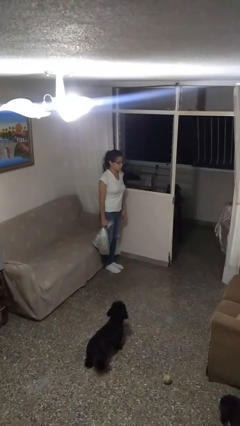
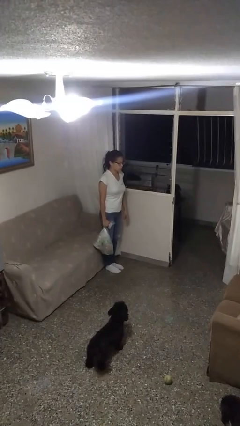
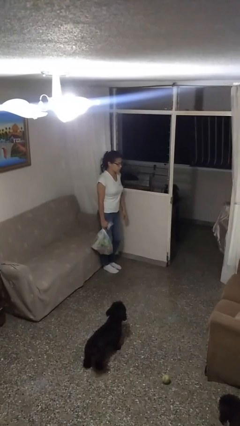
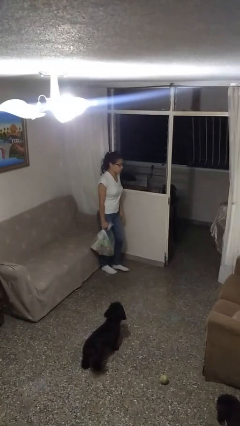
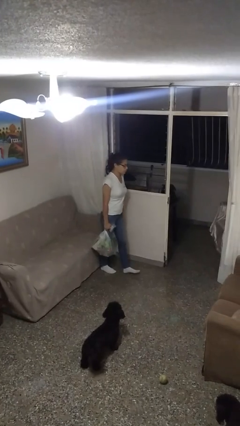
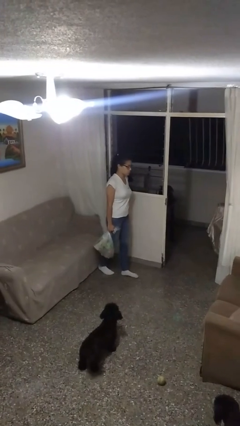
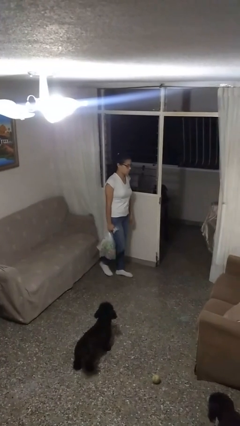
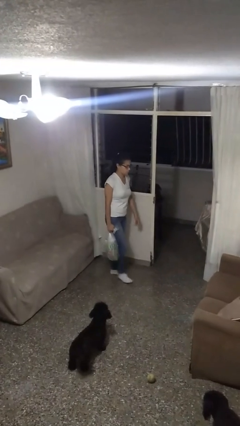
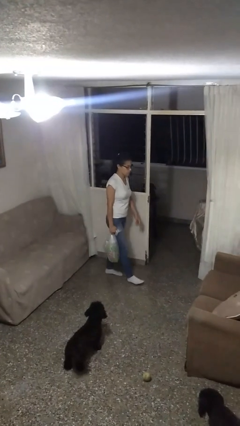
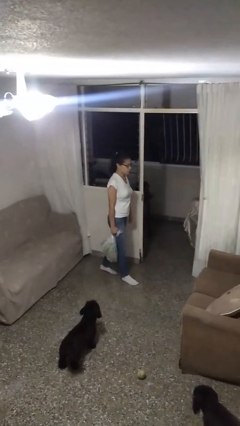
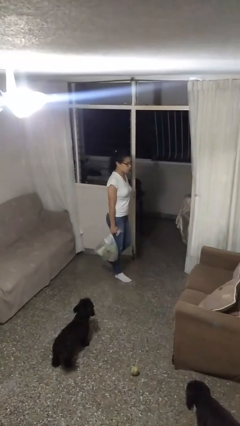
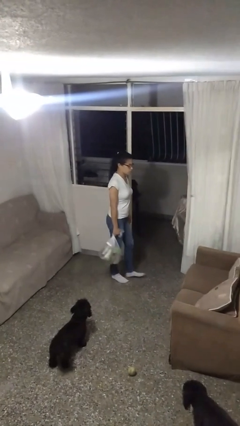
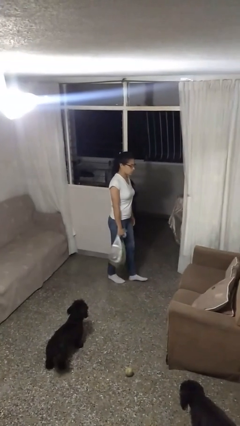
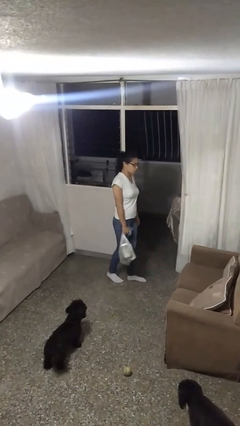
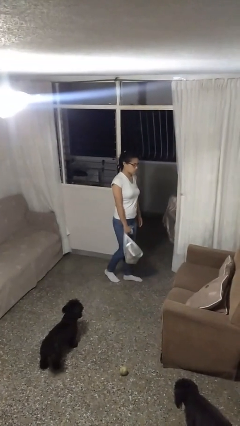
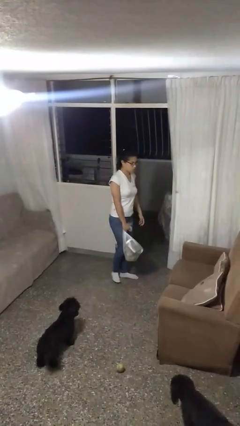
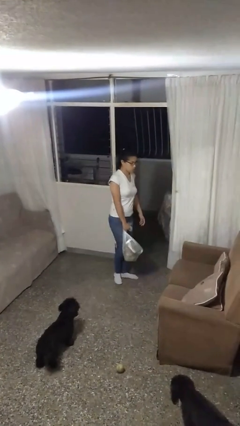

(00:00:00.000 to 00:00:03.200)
person carries groceries

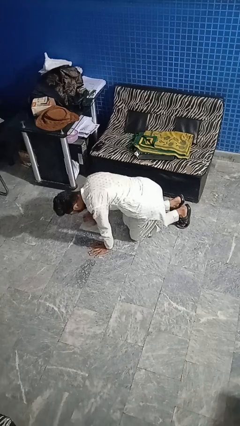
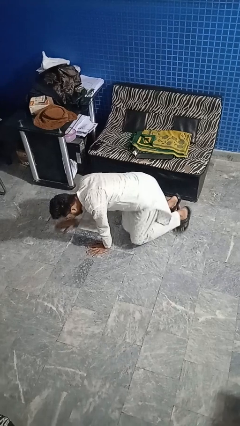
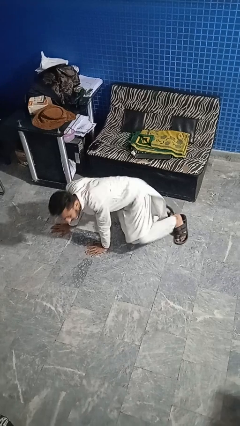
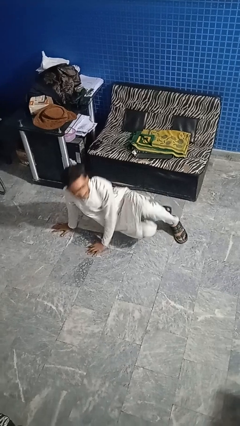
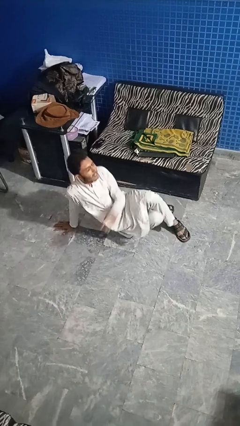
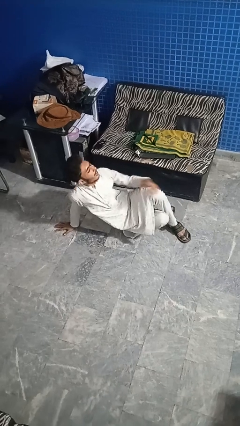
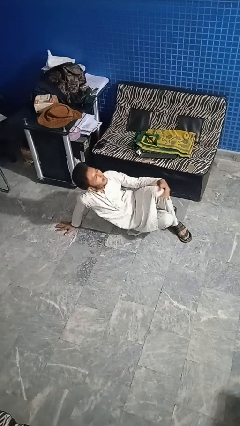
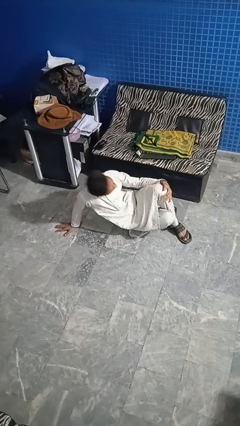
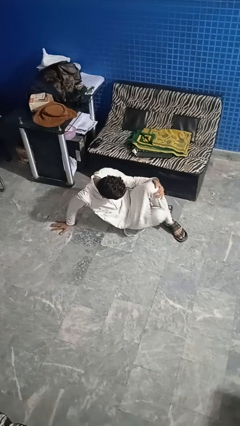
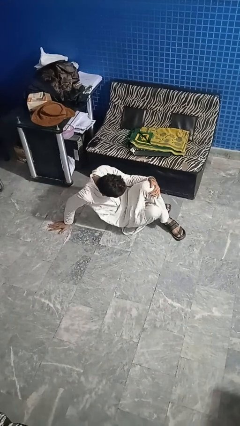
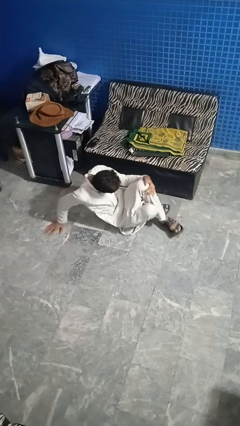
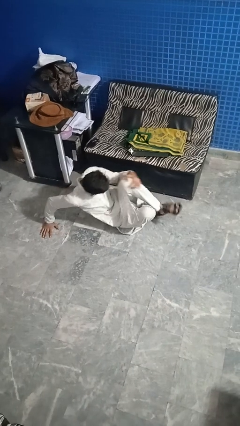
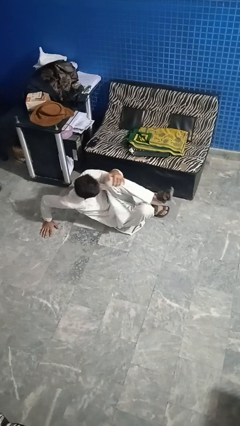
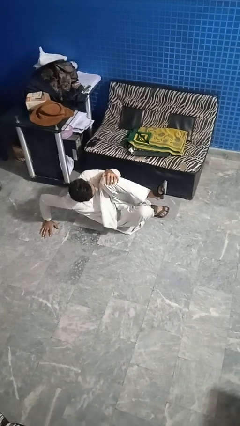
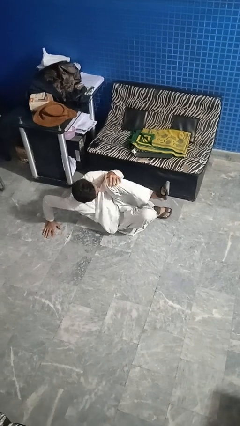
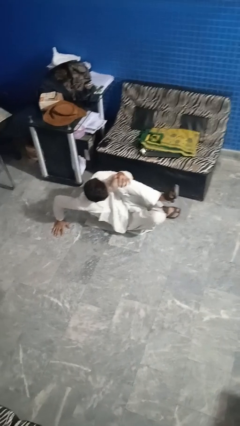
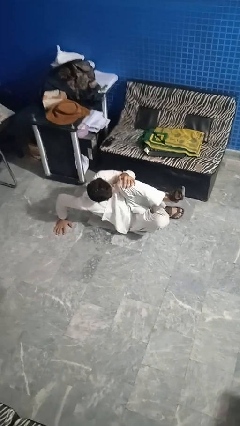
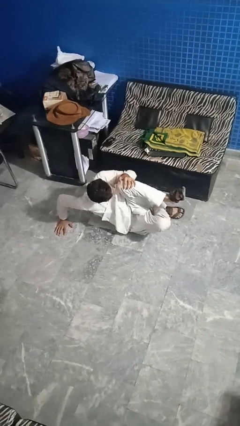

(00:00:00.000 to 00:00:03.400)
person lies down on floor

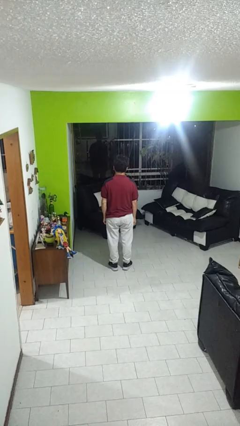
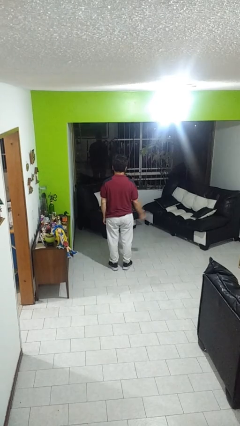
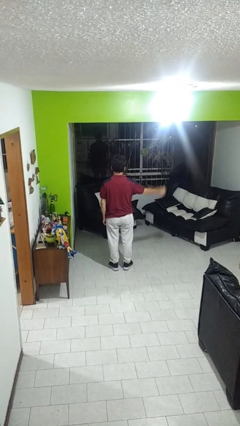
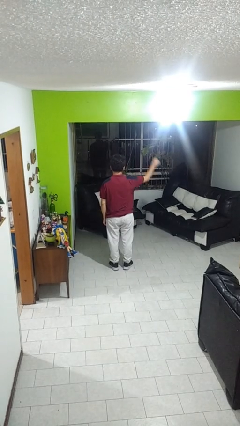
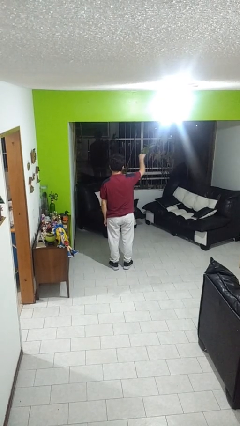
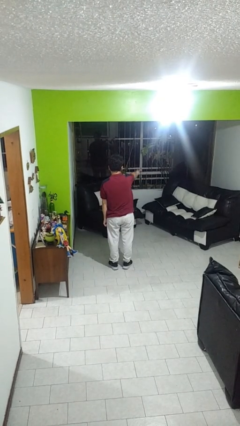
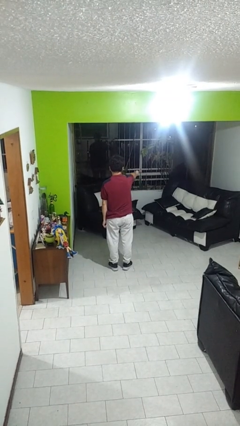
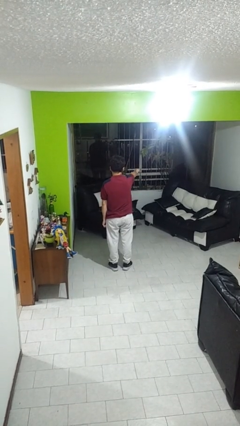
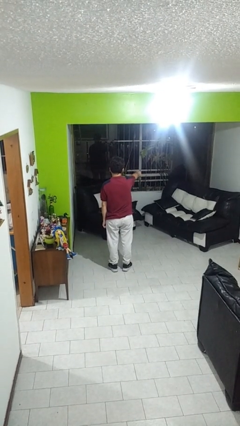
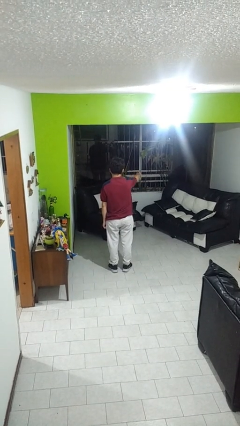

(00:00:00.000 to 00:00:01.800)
person gestures thumbs down

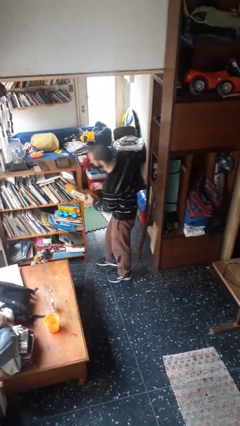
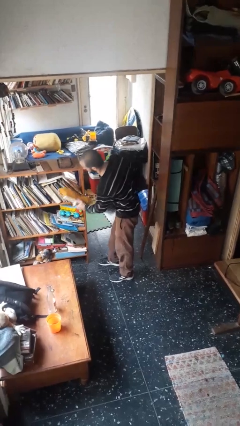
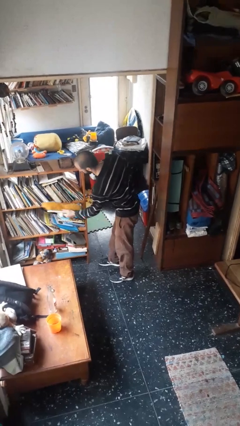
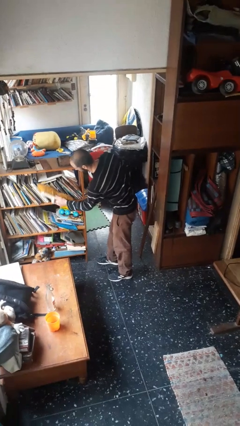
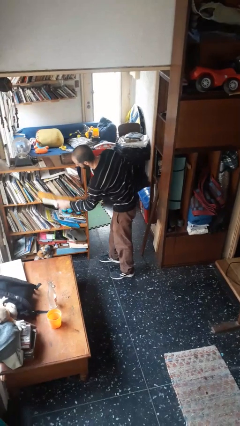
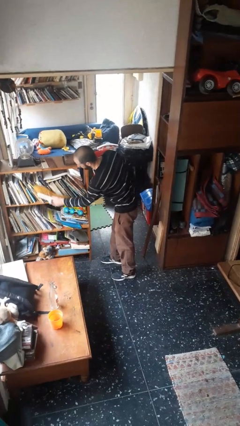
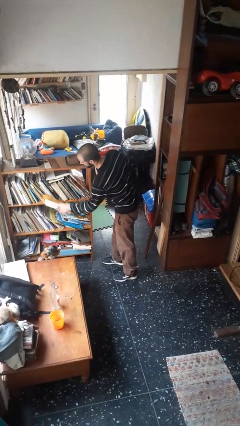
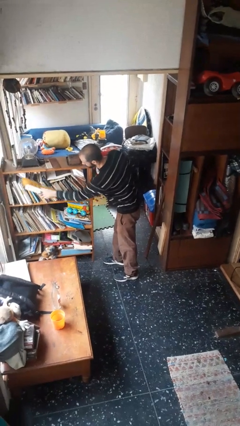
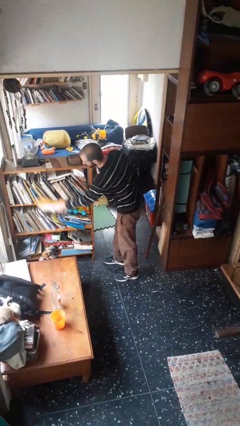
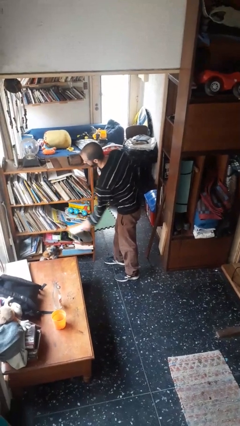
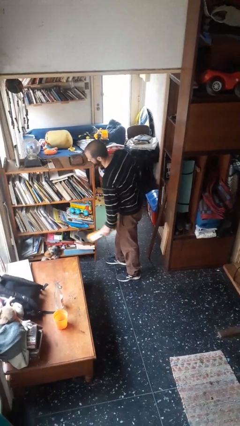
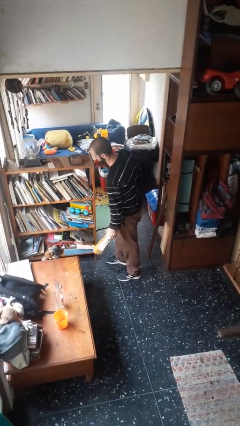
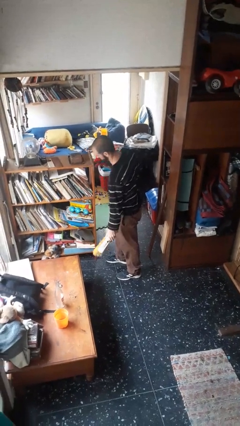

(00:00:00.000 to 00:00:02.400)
person dusts furniture

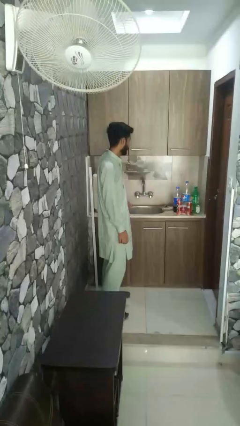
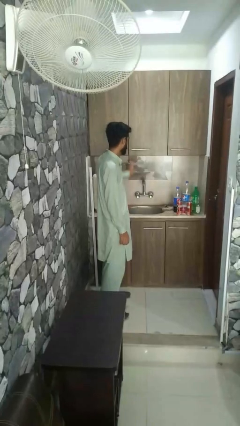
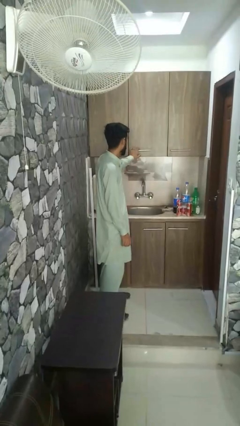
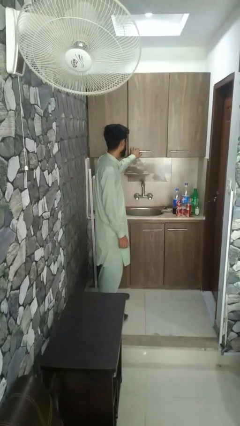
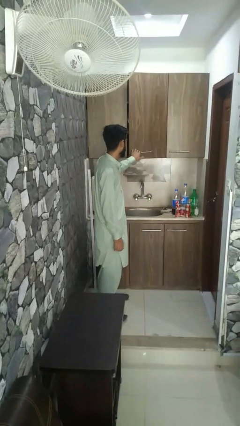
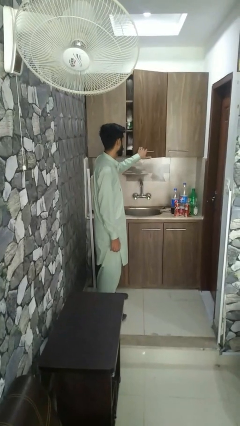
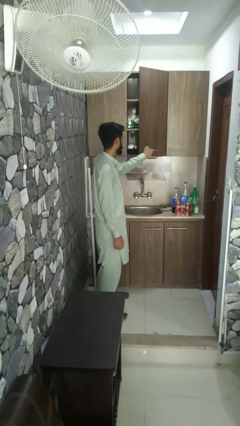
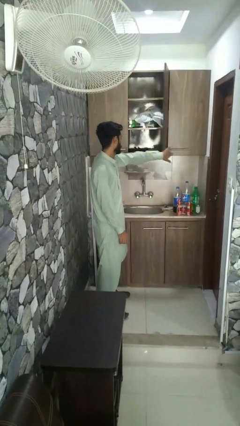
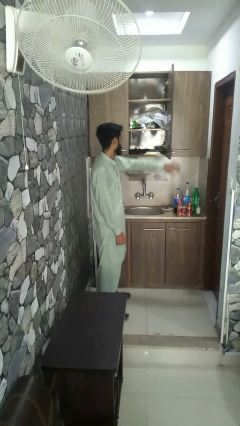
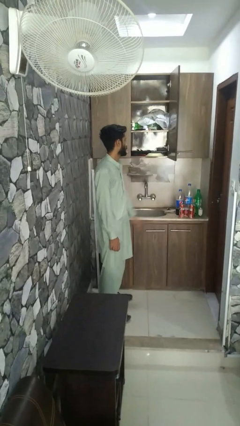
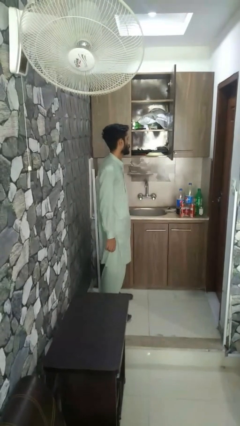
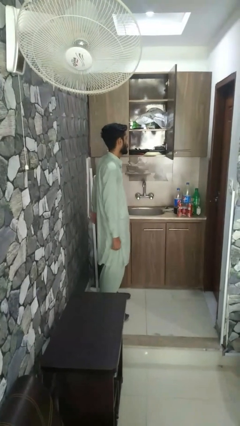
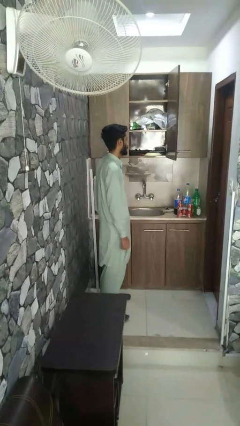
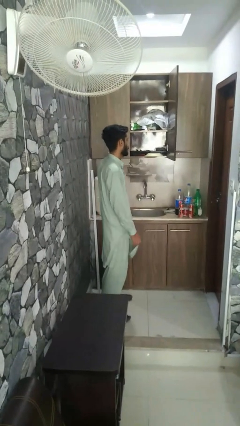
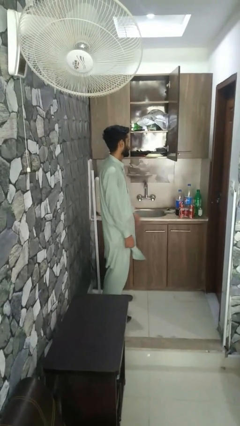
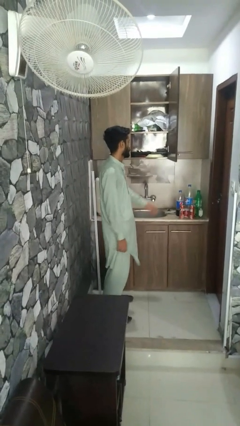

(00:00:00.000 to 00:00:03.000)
person opens closet door

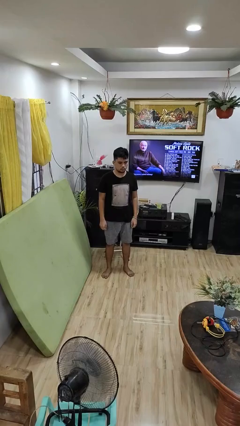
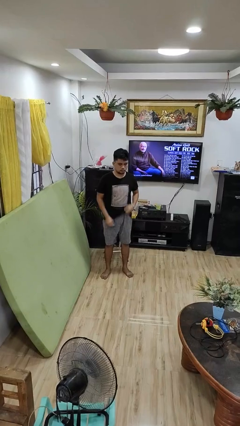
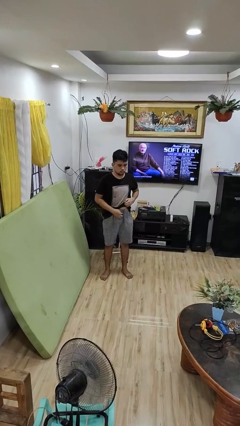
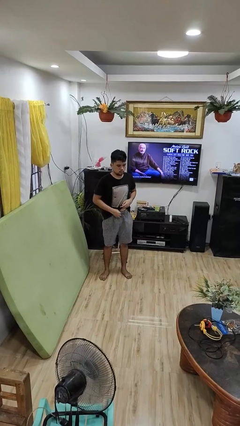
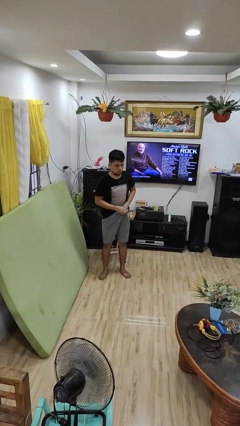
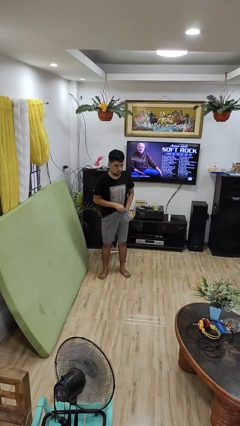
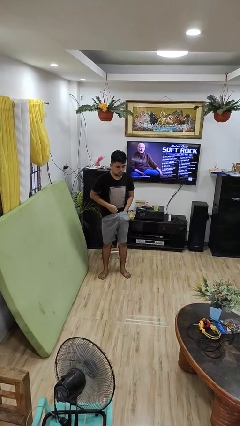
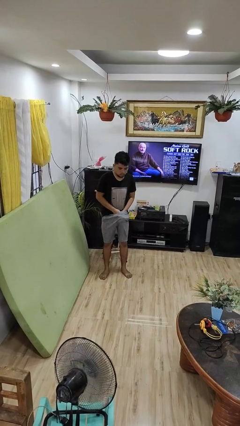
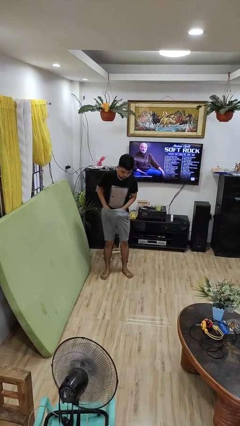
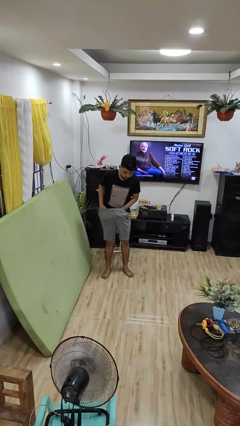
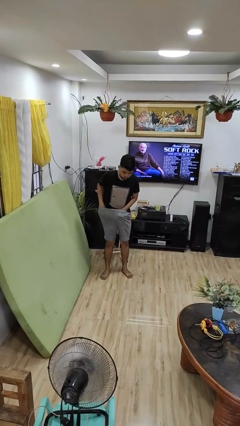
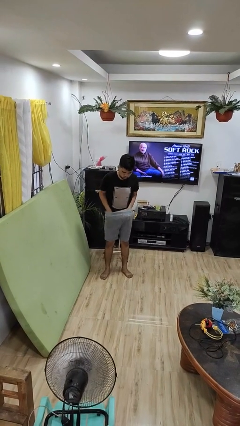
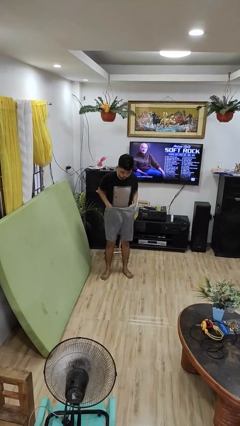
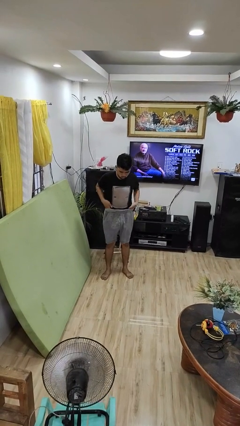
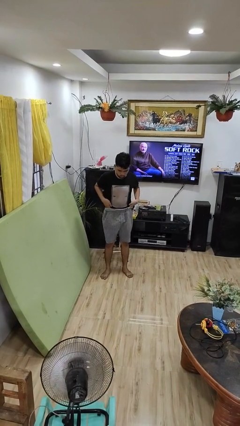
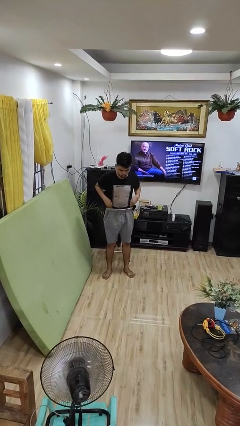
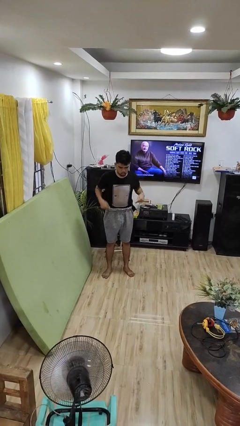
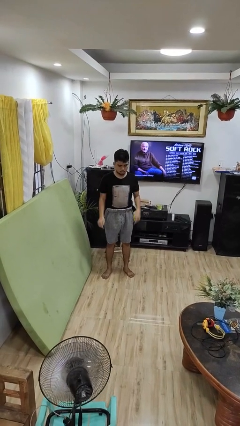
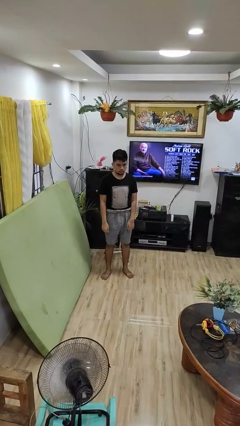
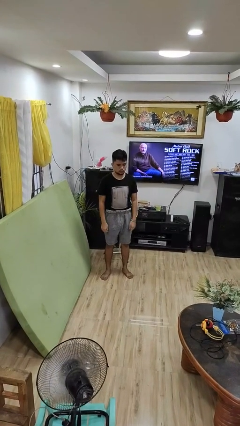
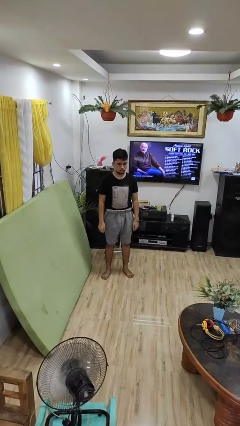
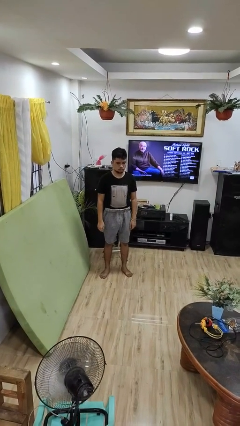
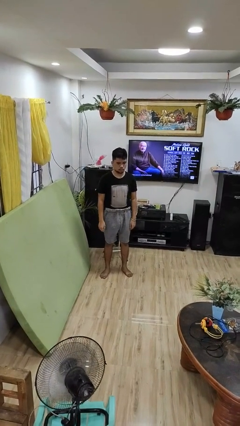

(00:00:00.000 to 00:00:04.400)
person tucks in shirt
